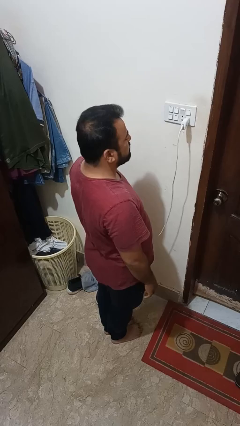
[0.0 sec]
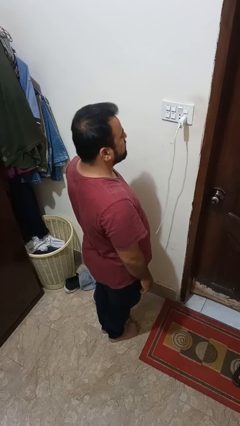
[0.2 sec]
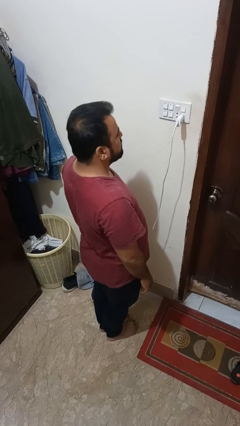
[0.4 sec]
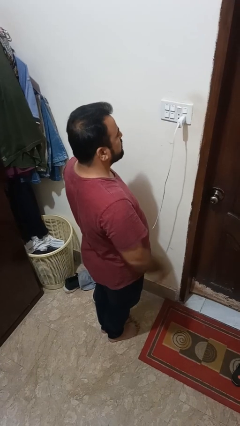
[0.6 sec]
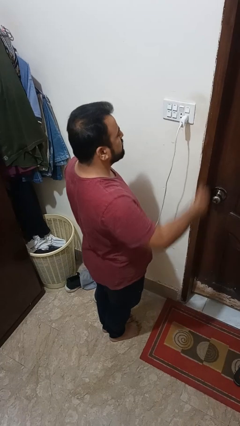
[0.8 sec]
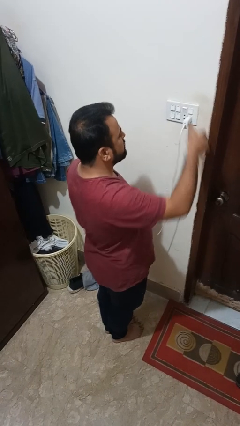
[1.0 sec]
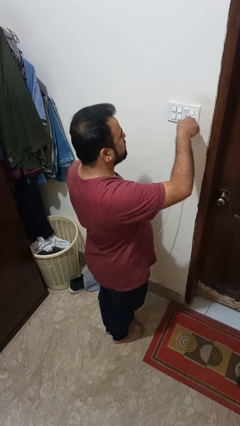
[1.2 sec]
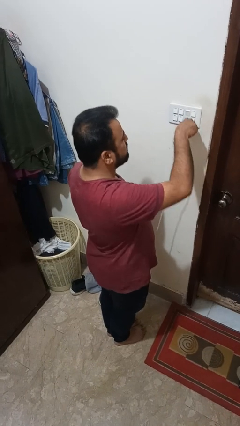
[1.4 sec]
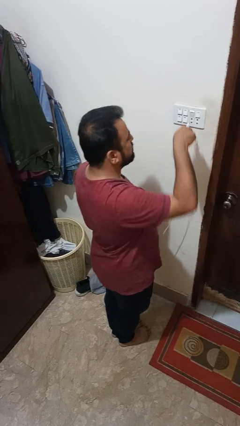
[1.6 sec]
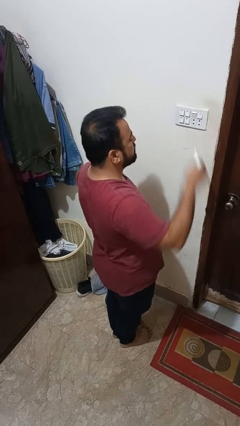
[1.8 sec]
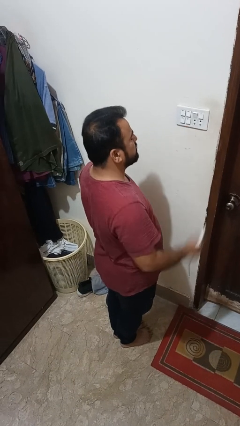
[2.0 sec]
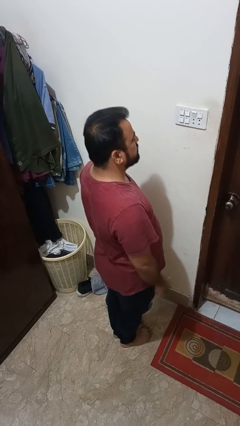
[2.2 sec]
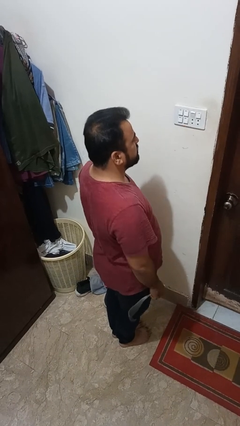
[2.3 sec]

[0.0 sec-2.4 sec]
person unplugs from electrical socket

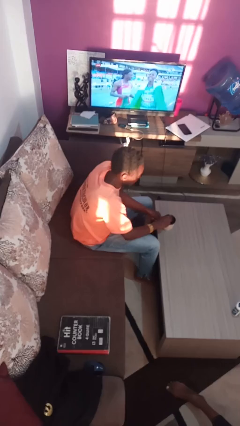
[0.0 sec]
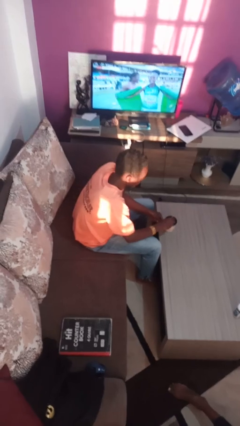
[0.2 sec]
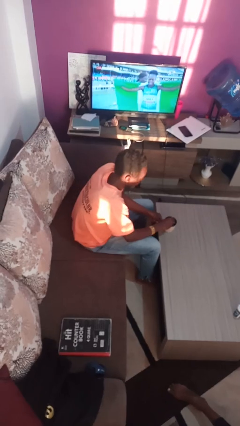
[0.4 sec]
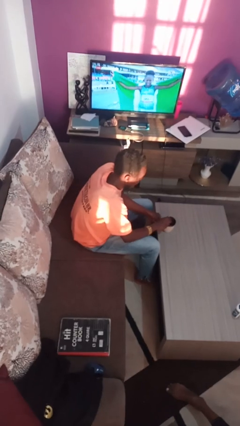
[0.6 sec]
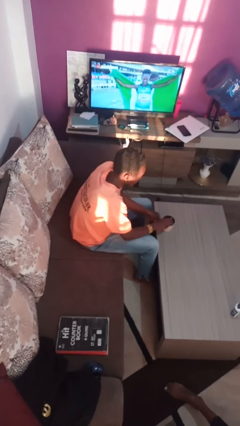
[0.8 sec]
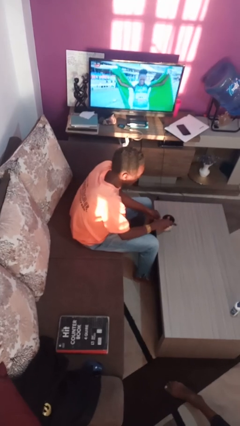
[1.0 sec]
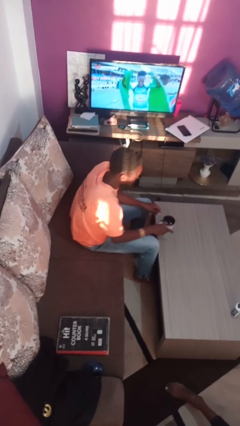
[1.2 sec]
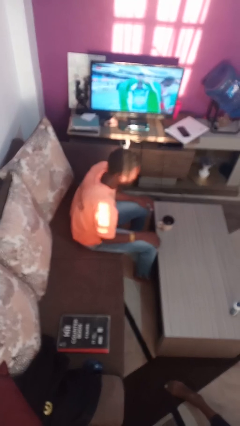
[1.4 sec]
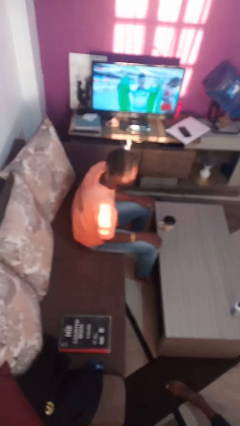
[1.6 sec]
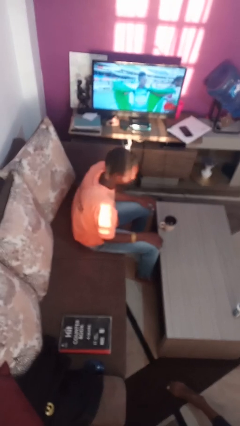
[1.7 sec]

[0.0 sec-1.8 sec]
person stirs mug

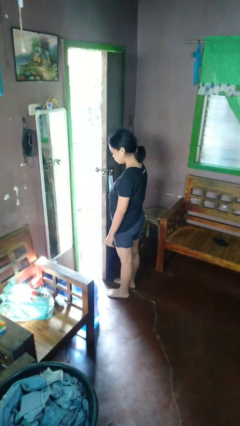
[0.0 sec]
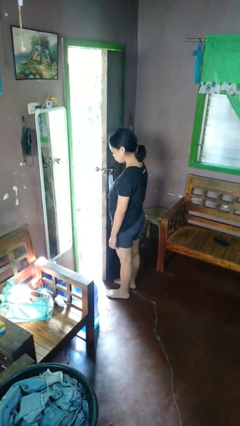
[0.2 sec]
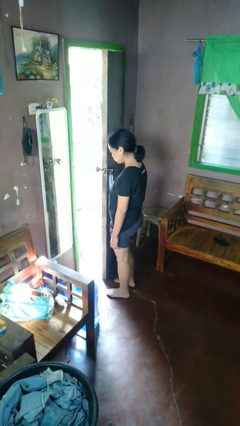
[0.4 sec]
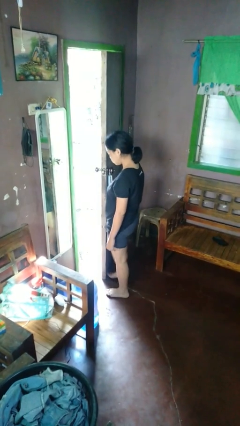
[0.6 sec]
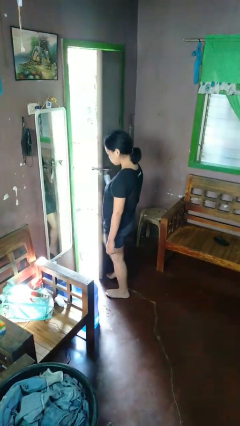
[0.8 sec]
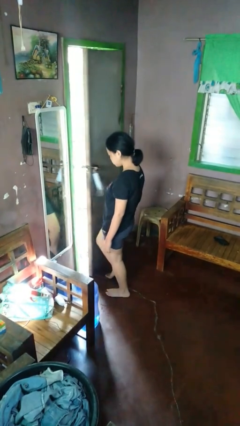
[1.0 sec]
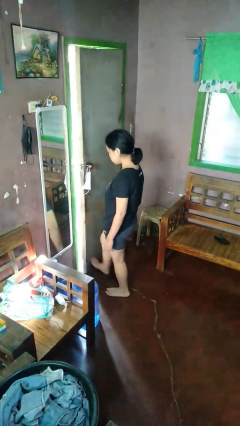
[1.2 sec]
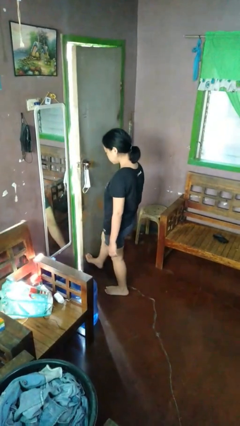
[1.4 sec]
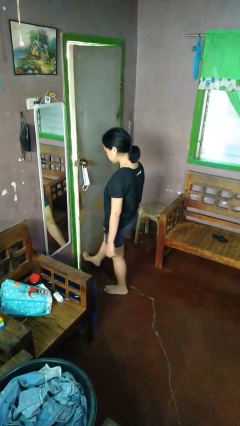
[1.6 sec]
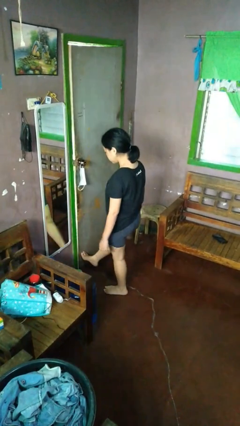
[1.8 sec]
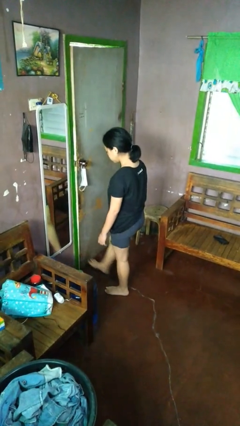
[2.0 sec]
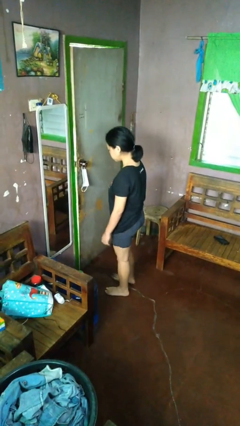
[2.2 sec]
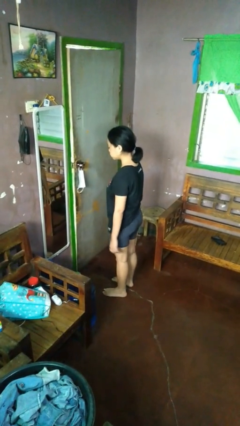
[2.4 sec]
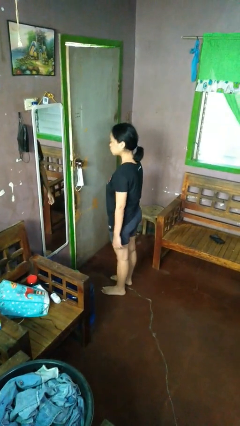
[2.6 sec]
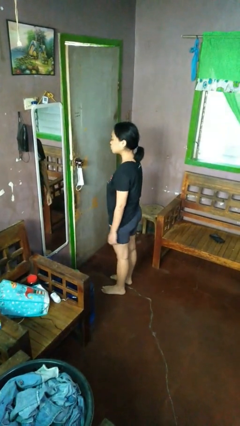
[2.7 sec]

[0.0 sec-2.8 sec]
person closes door with foot

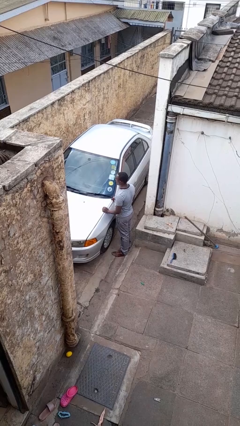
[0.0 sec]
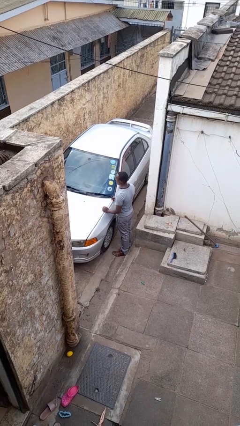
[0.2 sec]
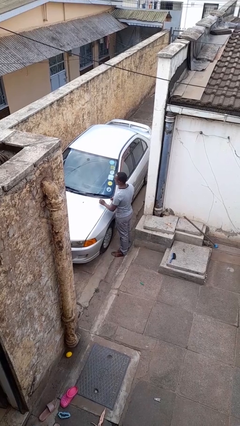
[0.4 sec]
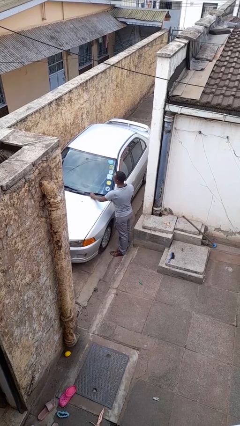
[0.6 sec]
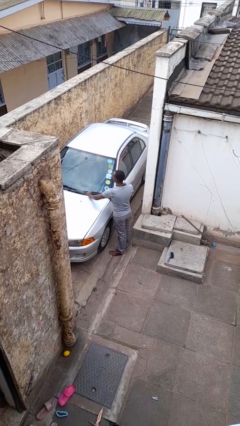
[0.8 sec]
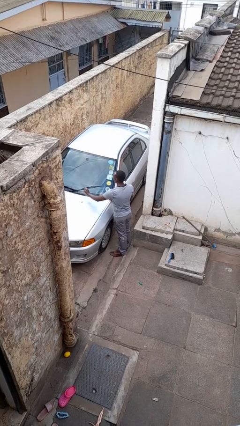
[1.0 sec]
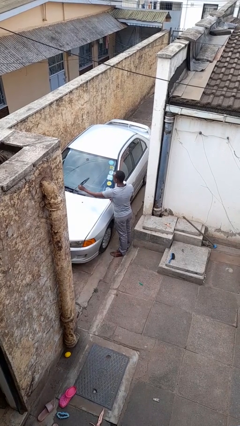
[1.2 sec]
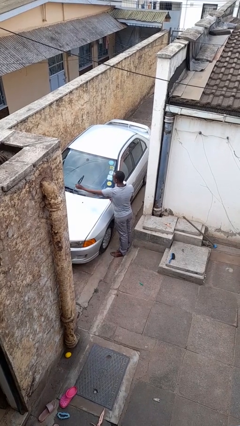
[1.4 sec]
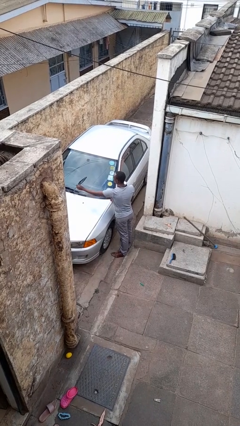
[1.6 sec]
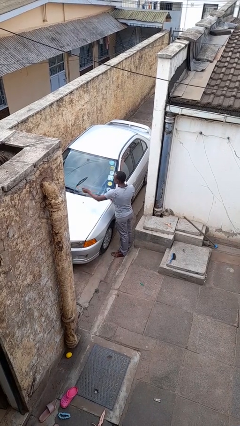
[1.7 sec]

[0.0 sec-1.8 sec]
person flips up car wipers

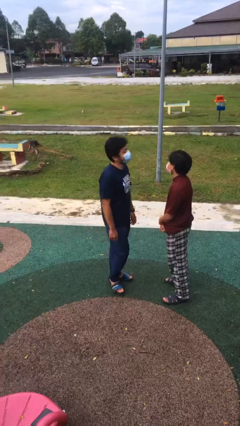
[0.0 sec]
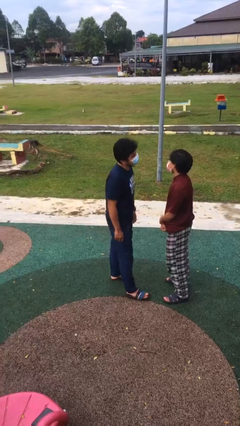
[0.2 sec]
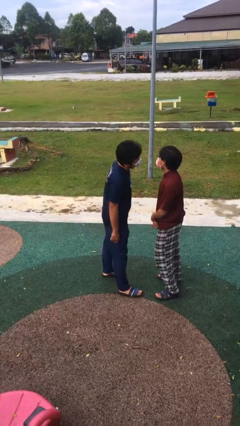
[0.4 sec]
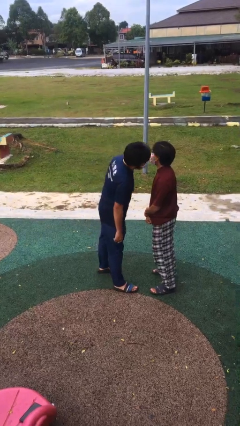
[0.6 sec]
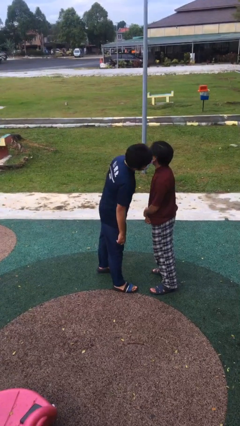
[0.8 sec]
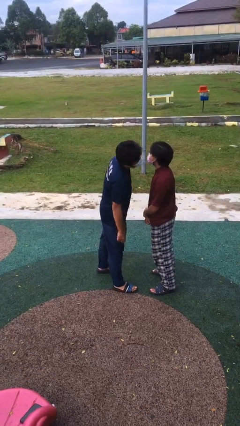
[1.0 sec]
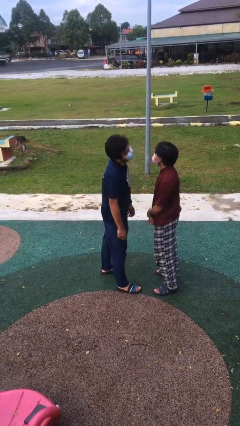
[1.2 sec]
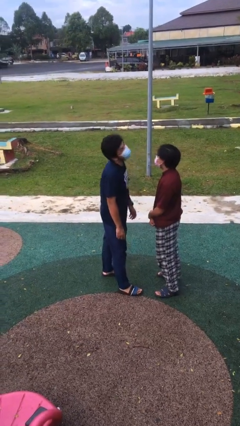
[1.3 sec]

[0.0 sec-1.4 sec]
person kisses cheek of person

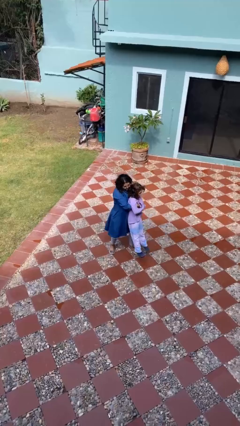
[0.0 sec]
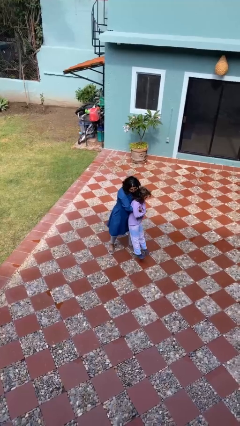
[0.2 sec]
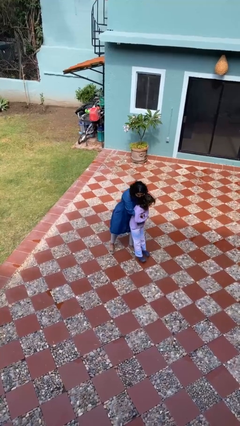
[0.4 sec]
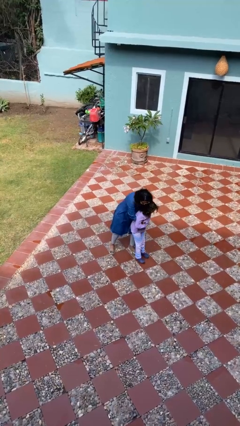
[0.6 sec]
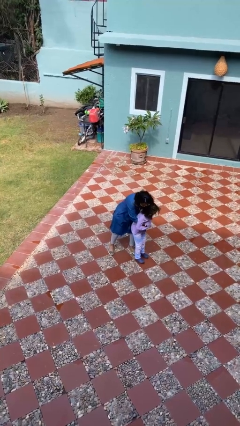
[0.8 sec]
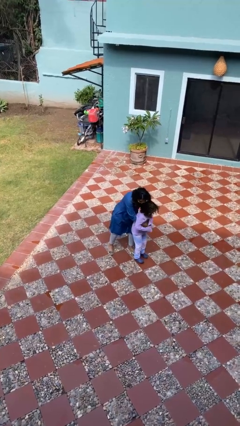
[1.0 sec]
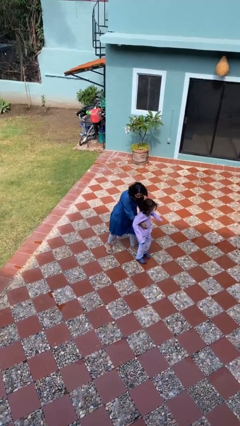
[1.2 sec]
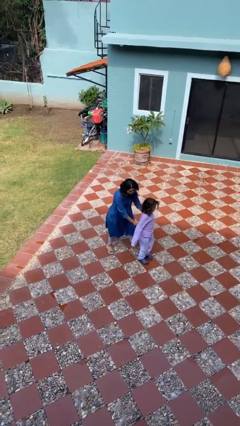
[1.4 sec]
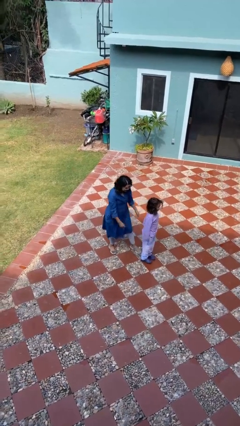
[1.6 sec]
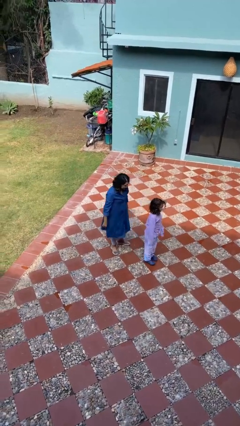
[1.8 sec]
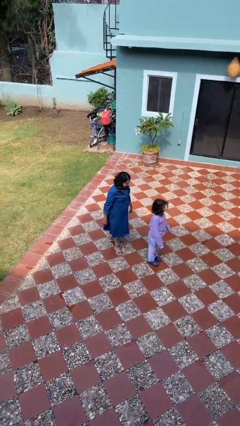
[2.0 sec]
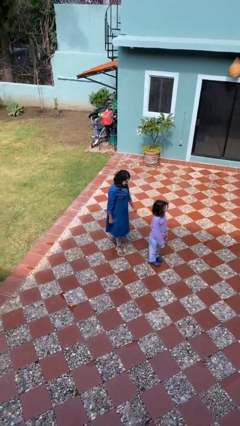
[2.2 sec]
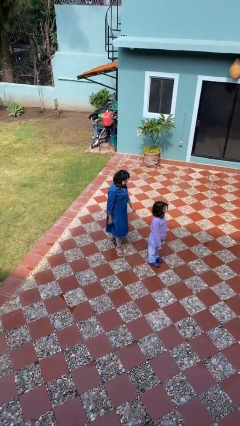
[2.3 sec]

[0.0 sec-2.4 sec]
person puts down person

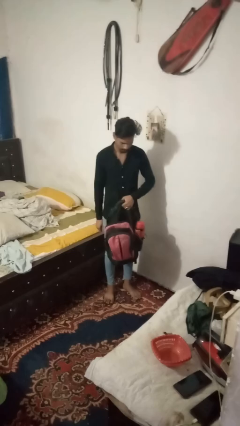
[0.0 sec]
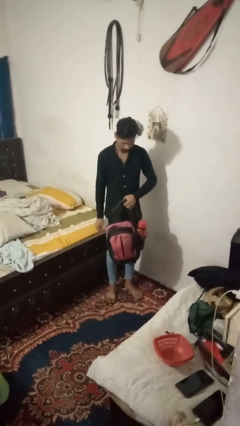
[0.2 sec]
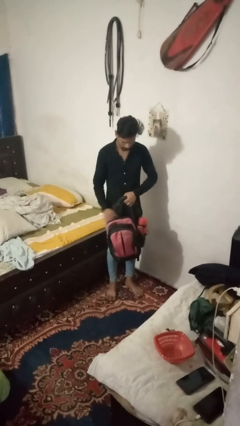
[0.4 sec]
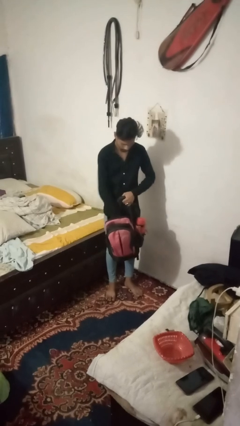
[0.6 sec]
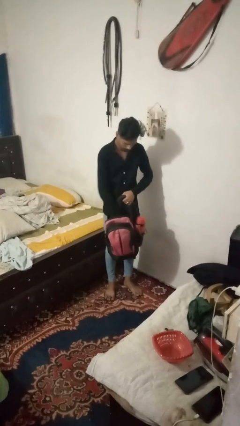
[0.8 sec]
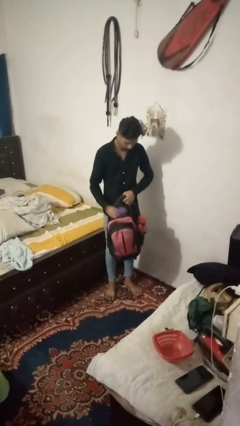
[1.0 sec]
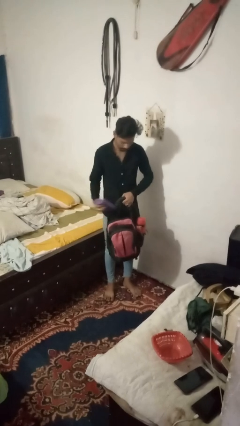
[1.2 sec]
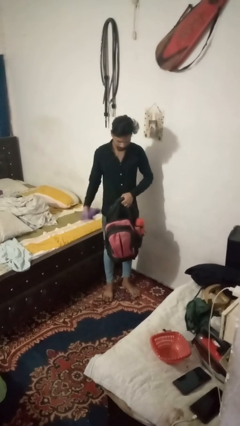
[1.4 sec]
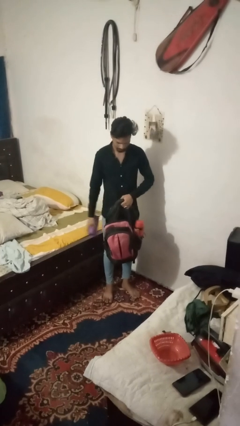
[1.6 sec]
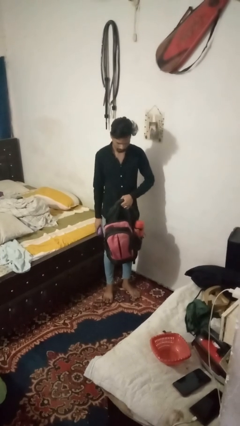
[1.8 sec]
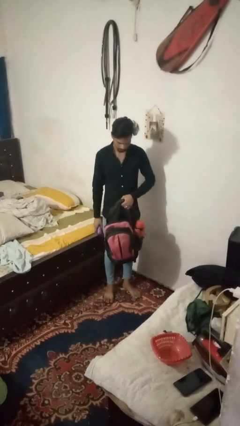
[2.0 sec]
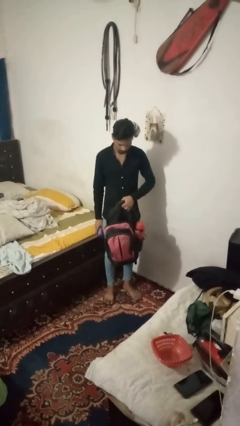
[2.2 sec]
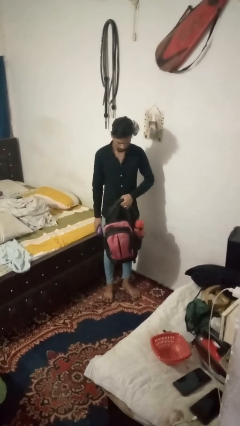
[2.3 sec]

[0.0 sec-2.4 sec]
person takes object from bag

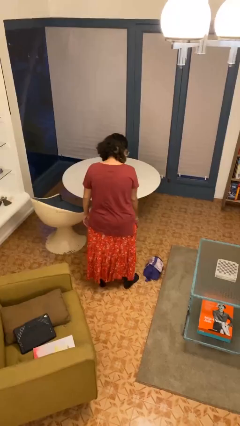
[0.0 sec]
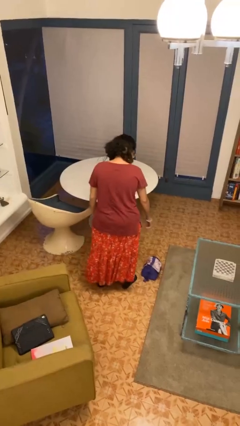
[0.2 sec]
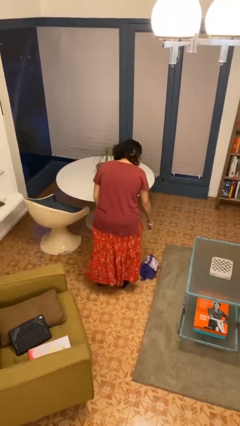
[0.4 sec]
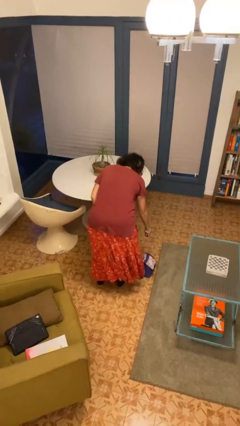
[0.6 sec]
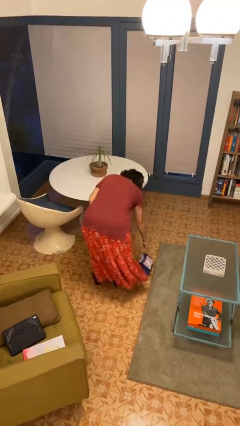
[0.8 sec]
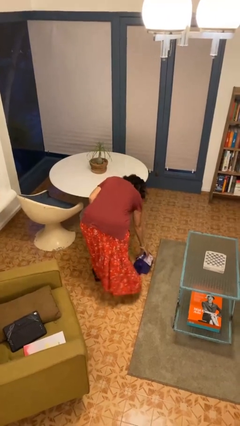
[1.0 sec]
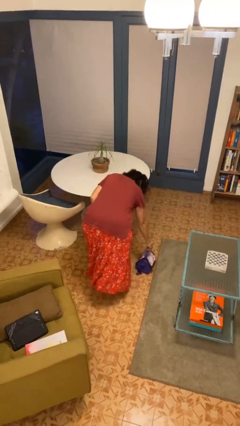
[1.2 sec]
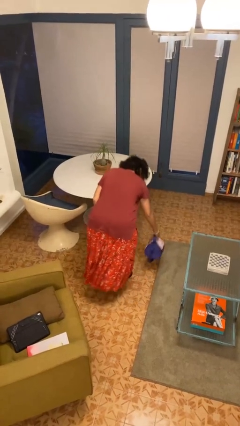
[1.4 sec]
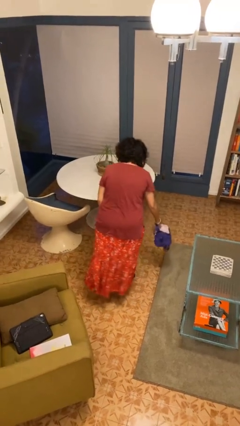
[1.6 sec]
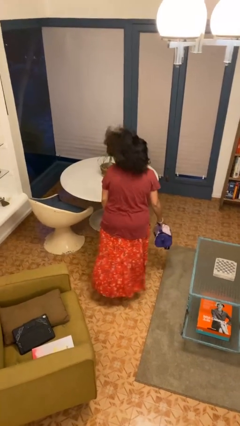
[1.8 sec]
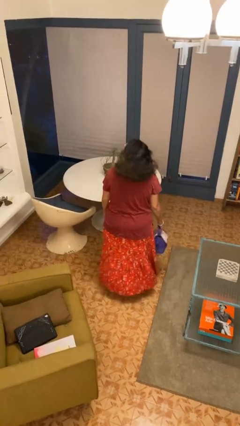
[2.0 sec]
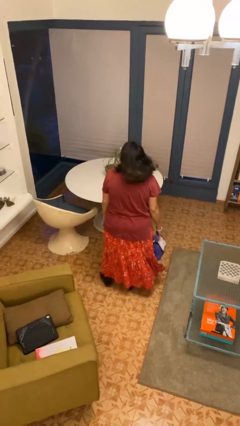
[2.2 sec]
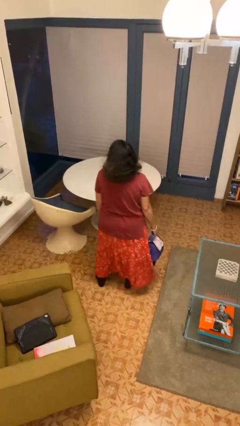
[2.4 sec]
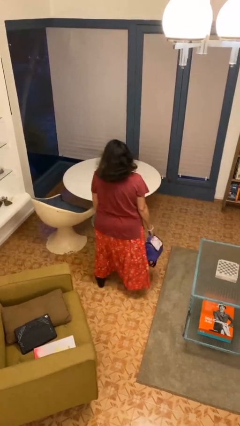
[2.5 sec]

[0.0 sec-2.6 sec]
person picks up object from floor
